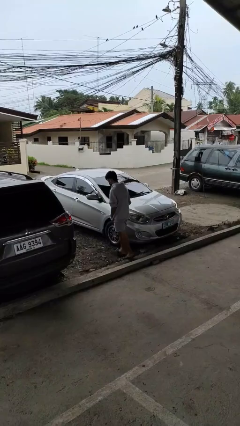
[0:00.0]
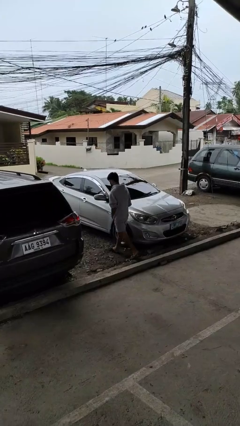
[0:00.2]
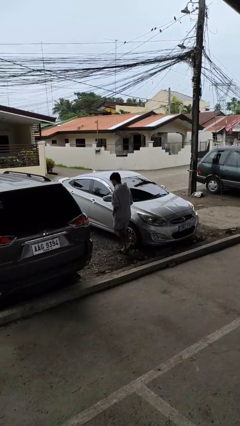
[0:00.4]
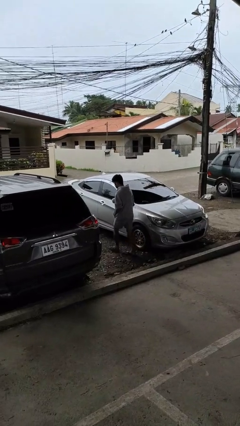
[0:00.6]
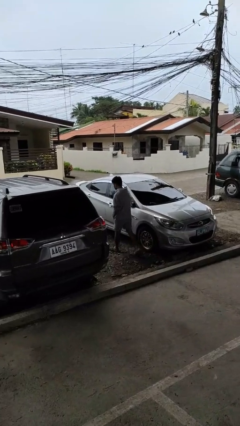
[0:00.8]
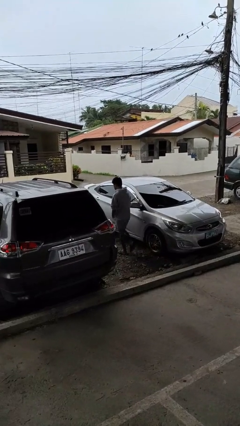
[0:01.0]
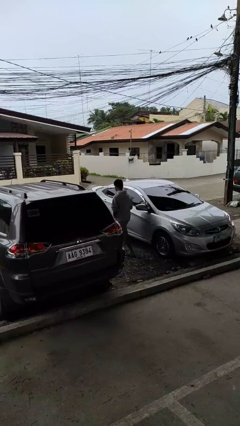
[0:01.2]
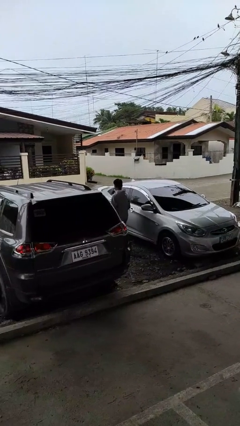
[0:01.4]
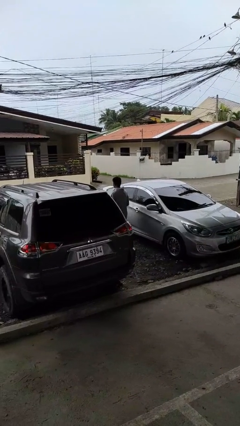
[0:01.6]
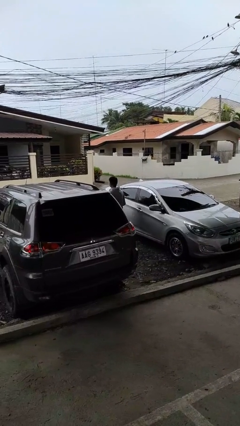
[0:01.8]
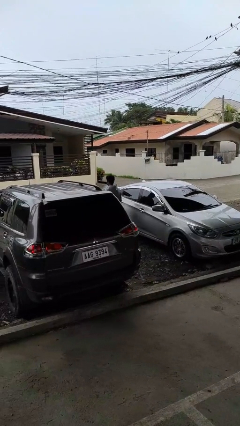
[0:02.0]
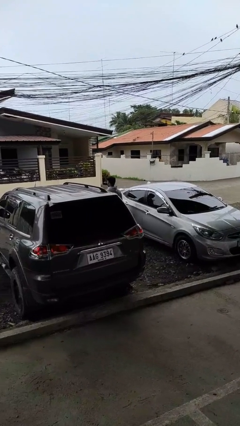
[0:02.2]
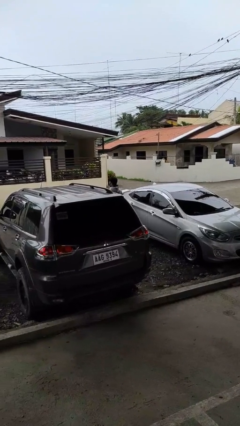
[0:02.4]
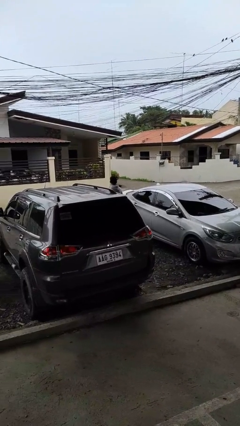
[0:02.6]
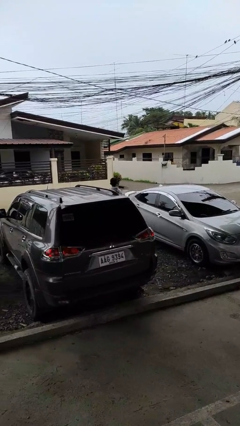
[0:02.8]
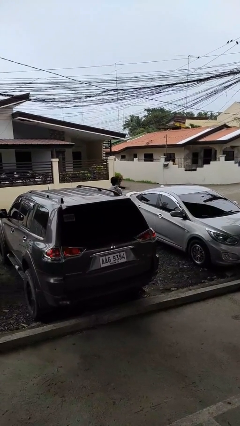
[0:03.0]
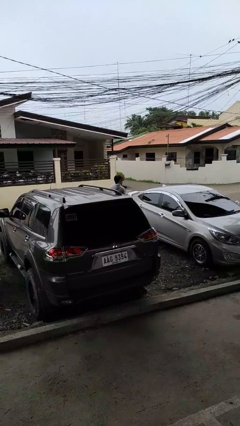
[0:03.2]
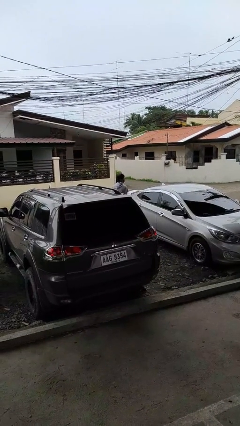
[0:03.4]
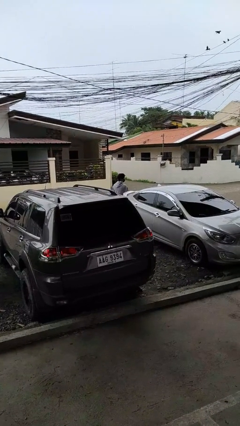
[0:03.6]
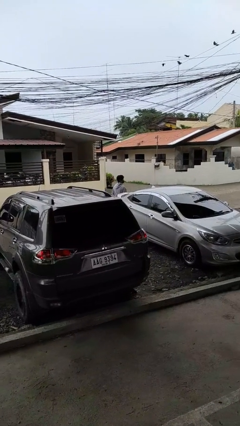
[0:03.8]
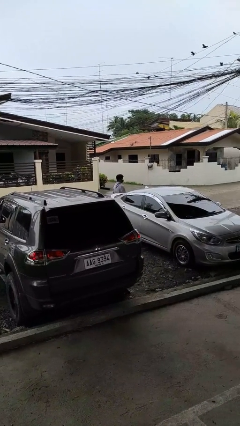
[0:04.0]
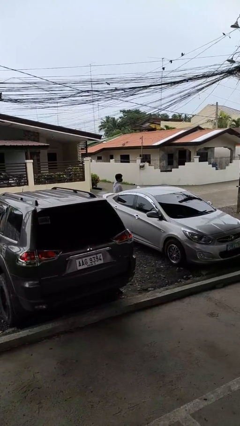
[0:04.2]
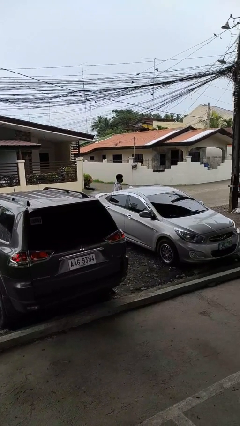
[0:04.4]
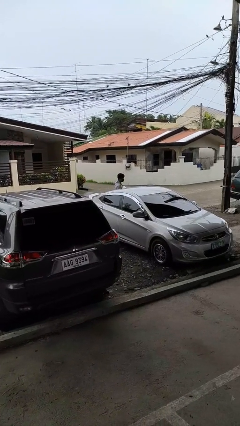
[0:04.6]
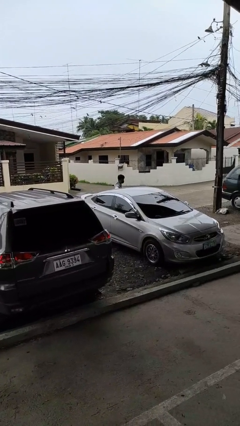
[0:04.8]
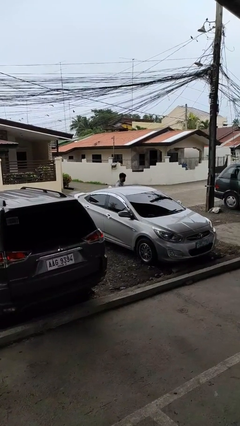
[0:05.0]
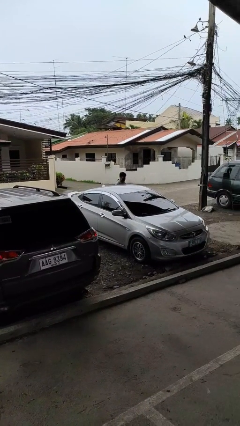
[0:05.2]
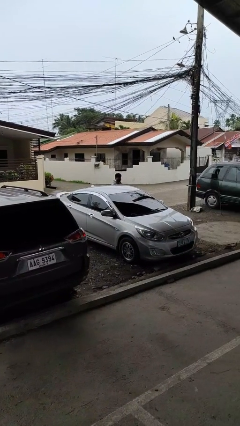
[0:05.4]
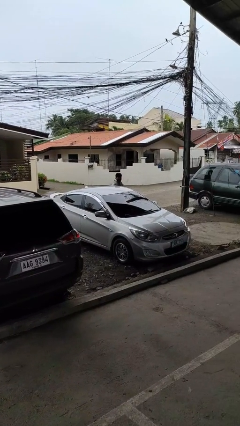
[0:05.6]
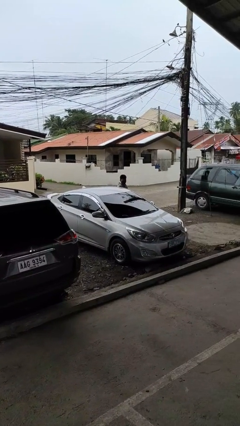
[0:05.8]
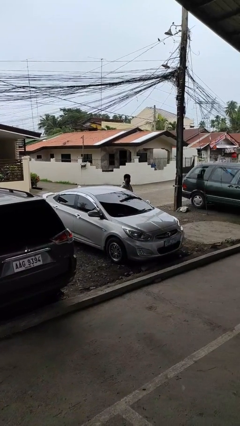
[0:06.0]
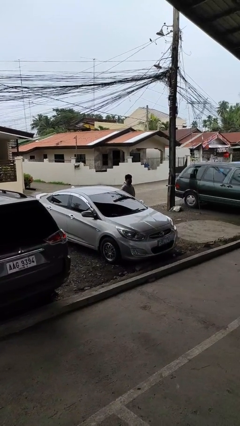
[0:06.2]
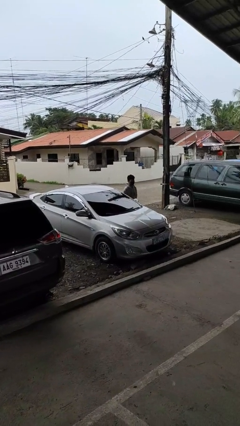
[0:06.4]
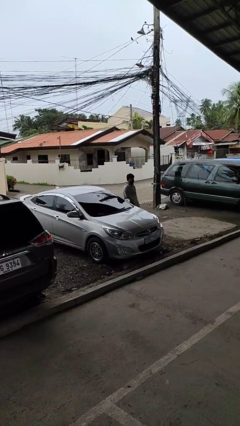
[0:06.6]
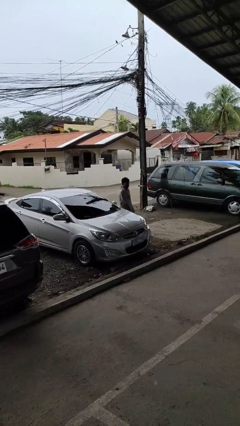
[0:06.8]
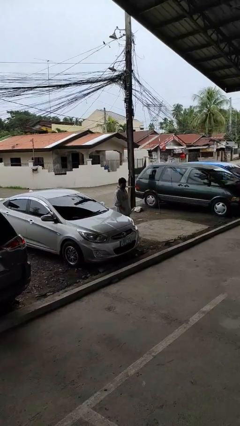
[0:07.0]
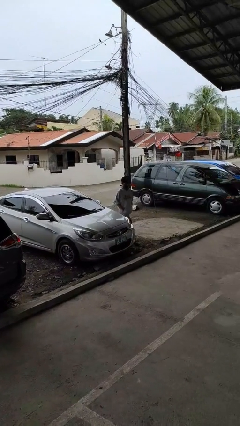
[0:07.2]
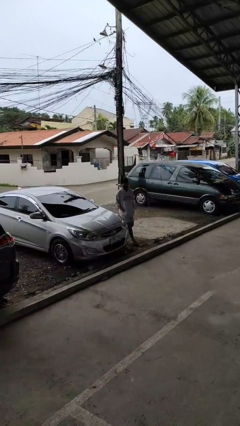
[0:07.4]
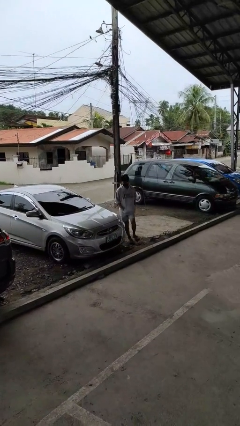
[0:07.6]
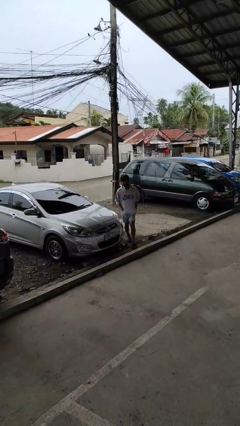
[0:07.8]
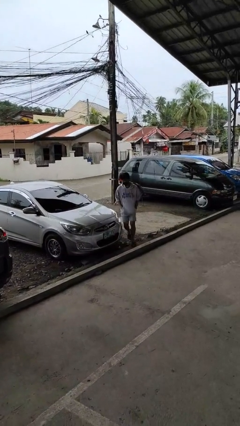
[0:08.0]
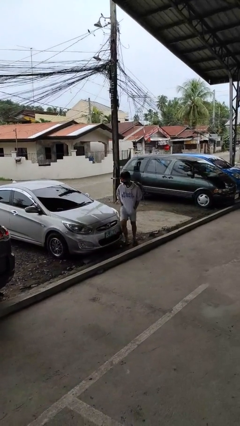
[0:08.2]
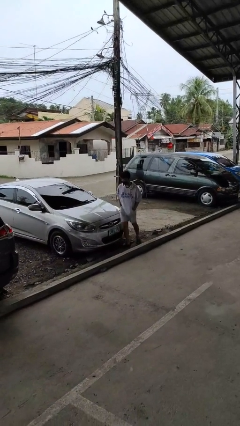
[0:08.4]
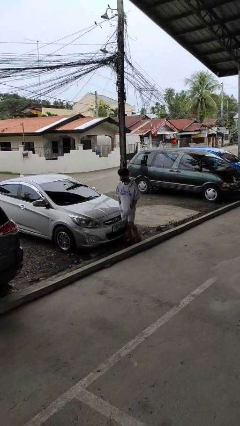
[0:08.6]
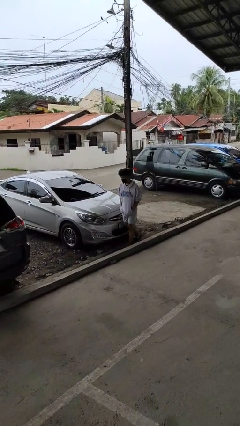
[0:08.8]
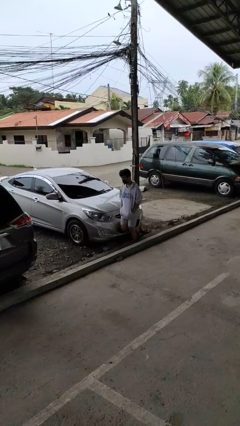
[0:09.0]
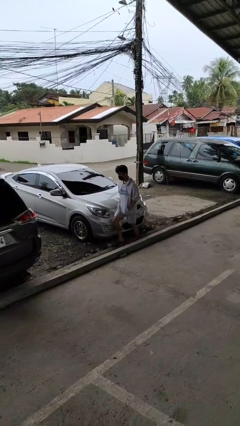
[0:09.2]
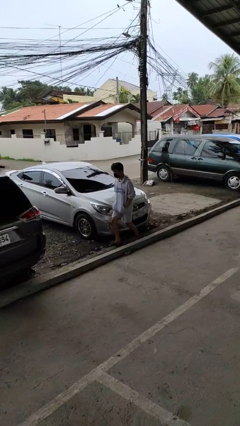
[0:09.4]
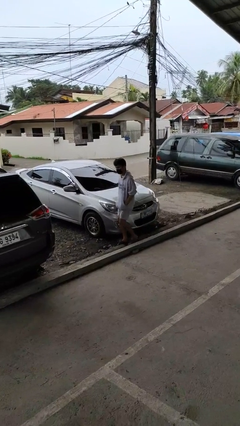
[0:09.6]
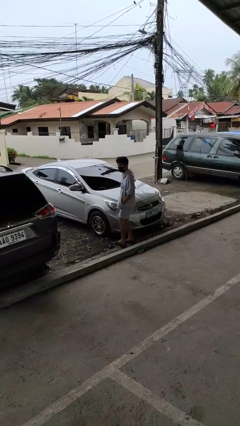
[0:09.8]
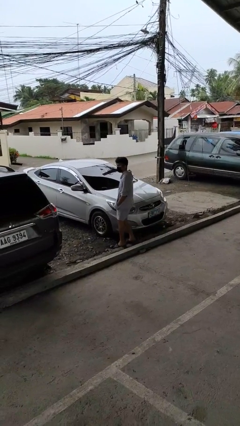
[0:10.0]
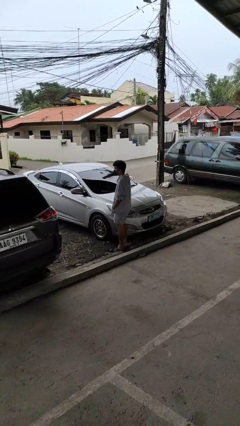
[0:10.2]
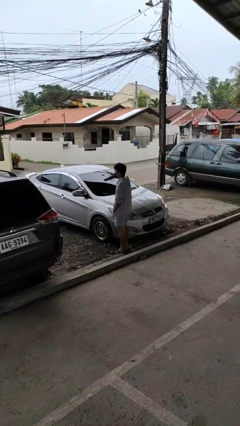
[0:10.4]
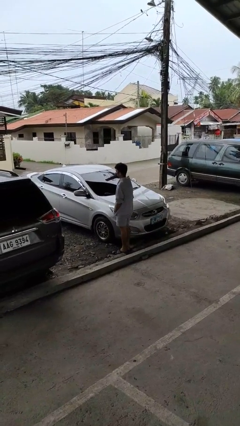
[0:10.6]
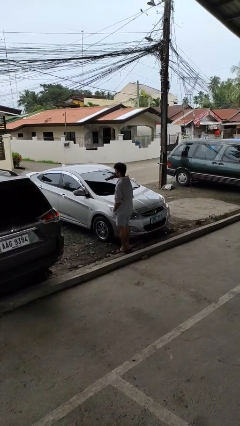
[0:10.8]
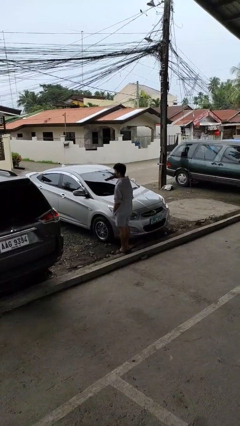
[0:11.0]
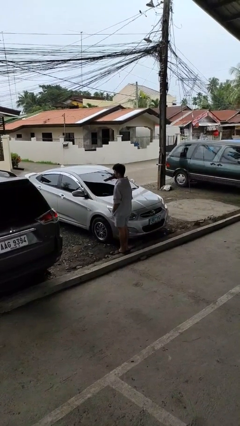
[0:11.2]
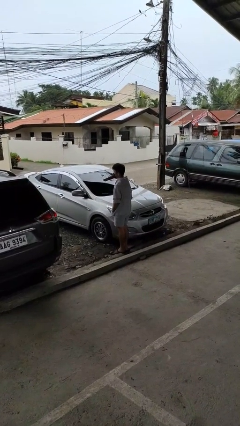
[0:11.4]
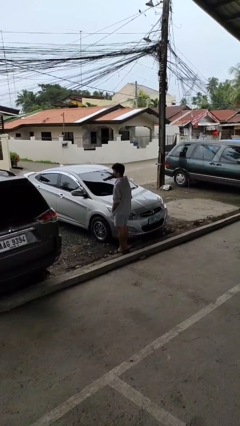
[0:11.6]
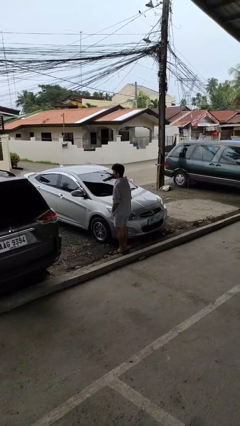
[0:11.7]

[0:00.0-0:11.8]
person walks around car

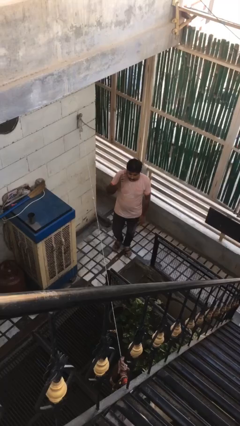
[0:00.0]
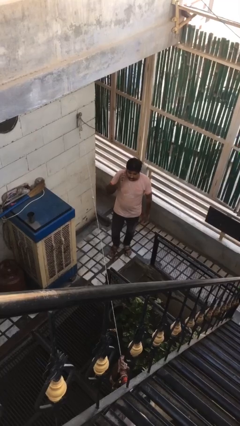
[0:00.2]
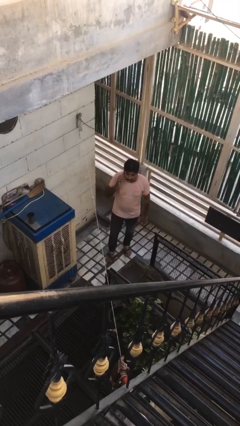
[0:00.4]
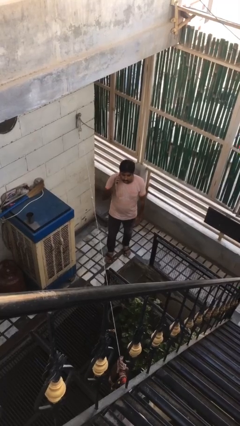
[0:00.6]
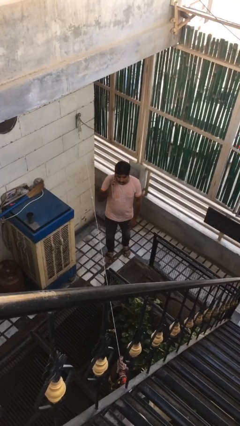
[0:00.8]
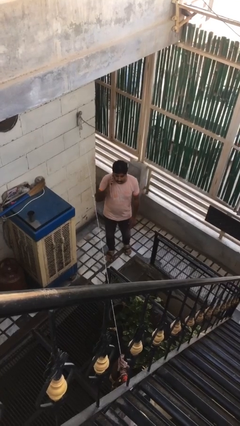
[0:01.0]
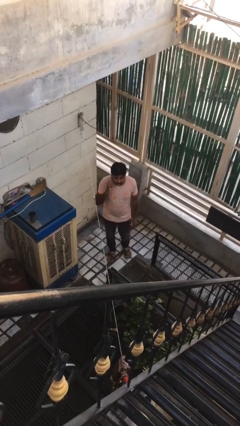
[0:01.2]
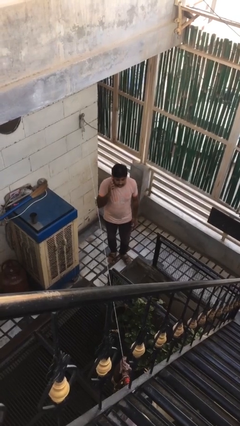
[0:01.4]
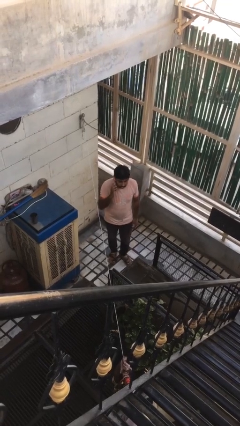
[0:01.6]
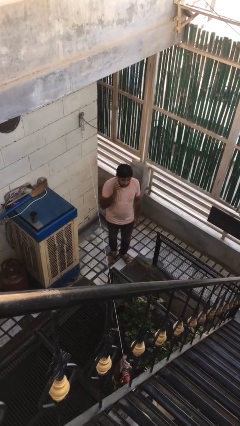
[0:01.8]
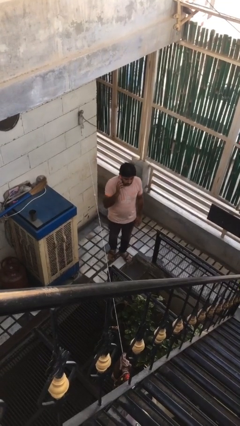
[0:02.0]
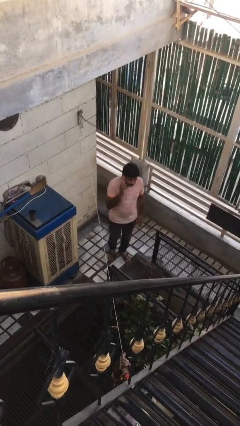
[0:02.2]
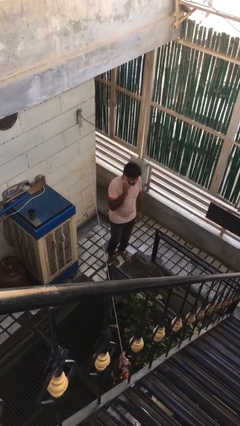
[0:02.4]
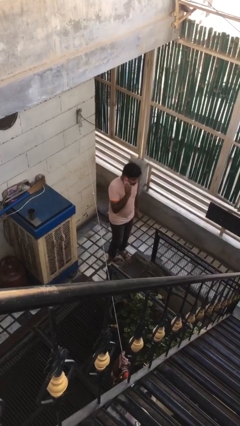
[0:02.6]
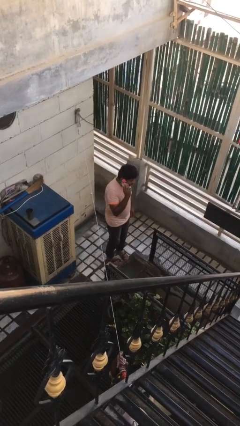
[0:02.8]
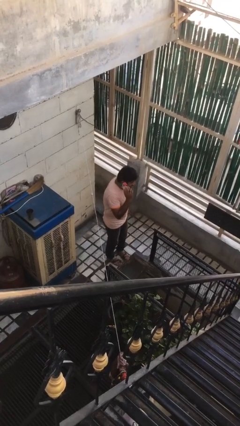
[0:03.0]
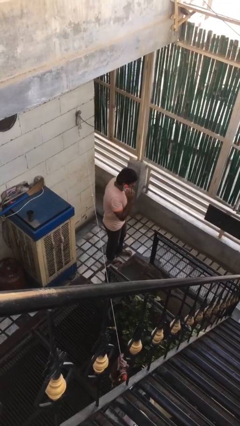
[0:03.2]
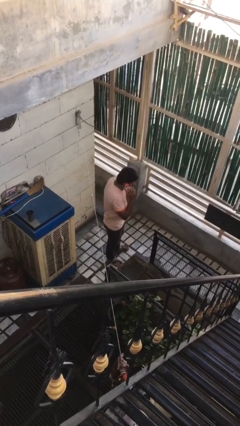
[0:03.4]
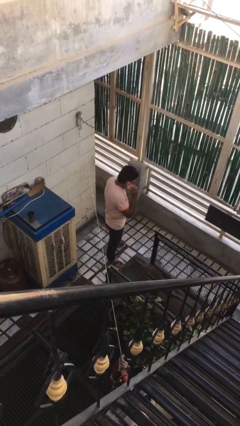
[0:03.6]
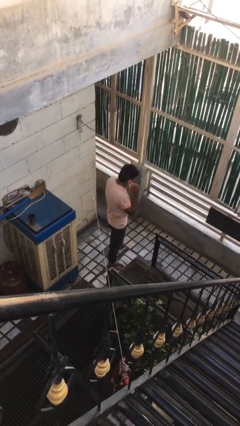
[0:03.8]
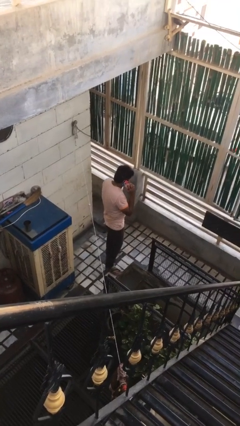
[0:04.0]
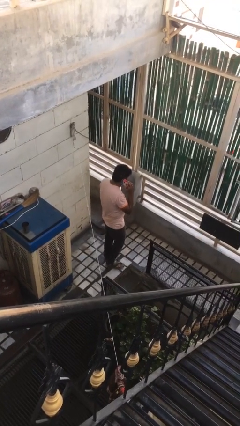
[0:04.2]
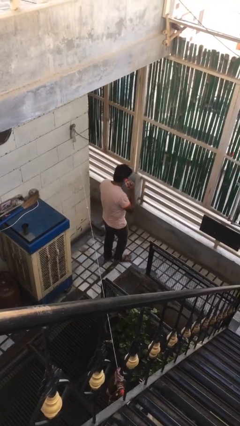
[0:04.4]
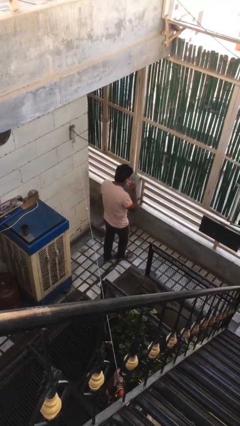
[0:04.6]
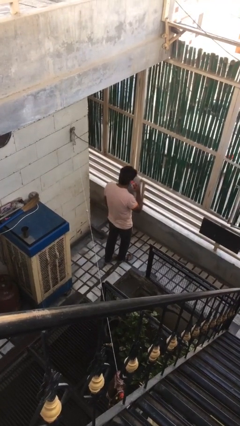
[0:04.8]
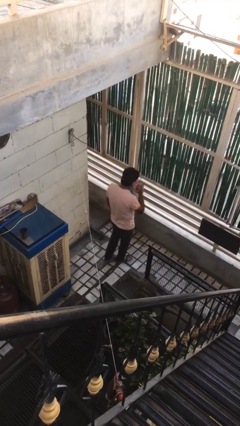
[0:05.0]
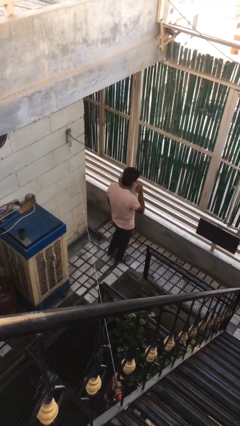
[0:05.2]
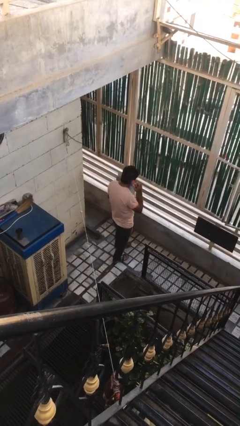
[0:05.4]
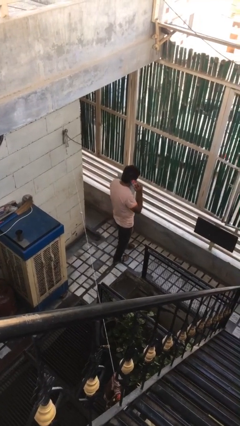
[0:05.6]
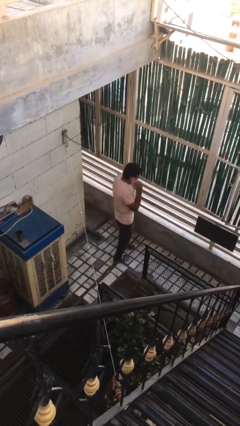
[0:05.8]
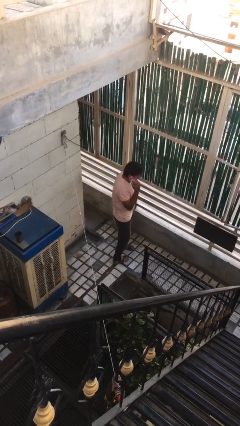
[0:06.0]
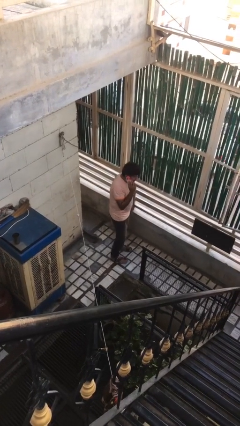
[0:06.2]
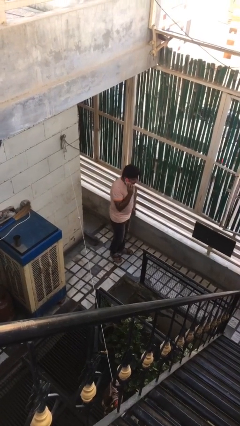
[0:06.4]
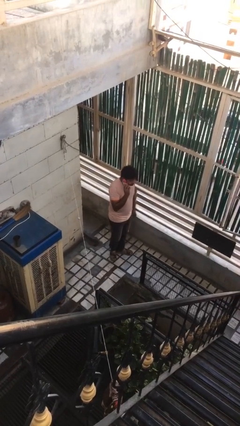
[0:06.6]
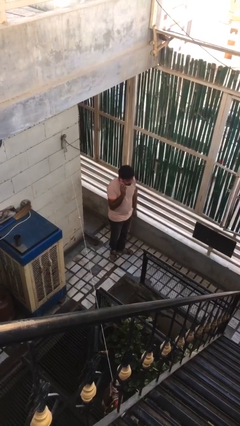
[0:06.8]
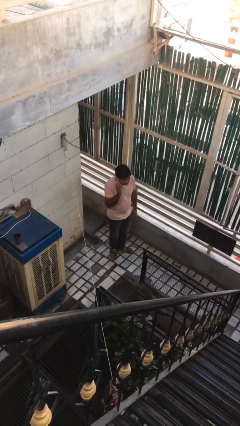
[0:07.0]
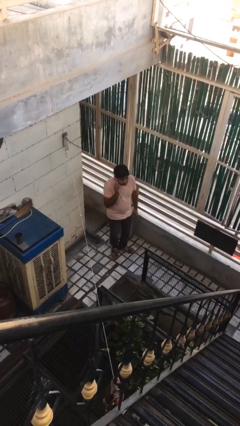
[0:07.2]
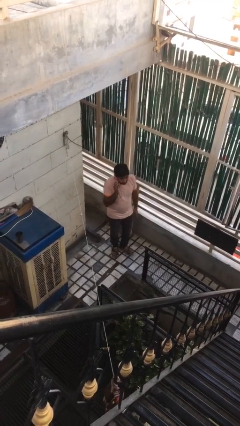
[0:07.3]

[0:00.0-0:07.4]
person talks on phone
